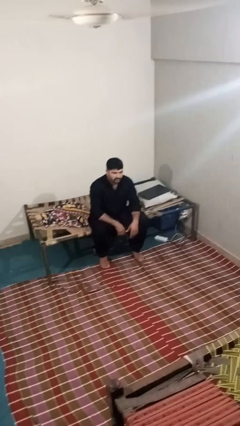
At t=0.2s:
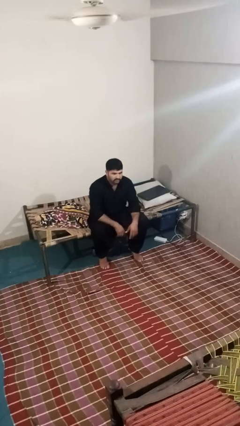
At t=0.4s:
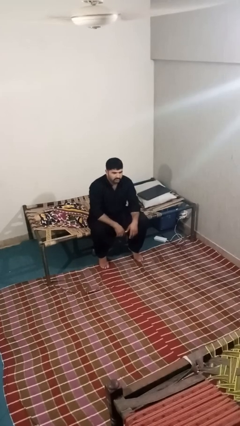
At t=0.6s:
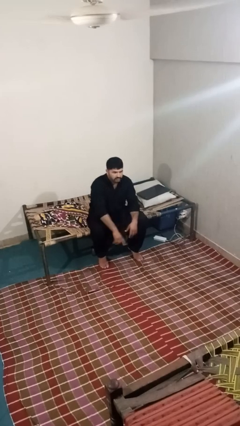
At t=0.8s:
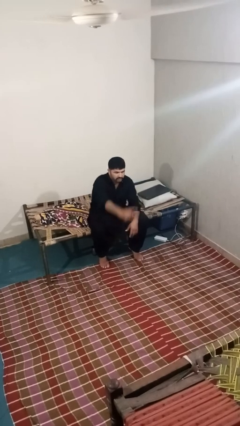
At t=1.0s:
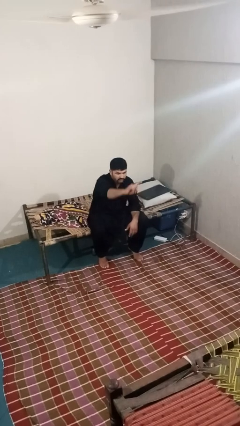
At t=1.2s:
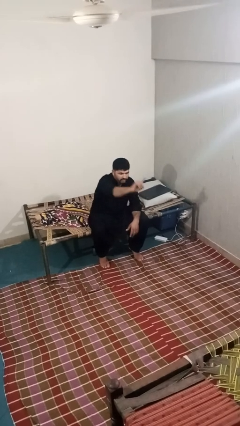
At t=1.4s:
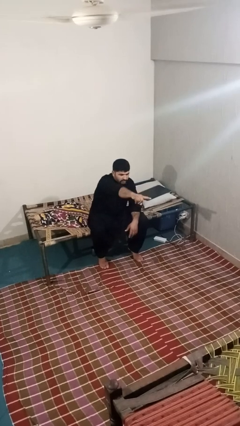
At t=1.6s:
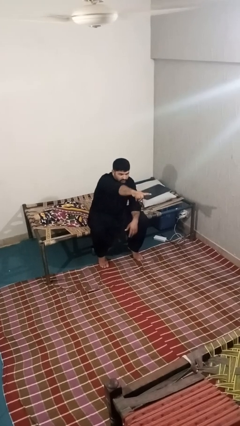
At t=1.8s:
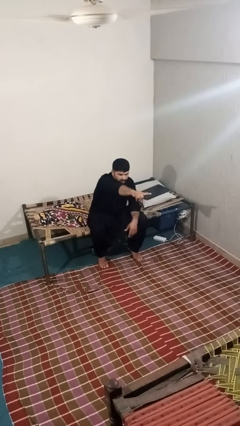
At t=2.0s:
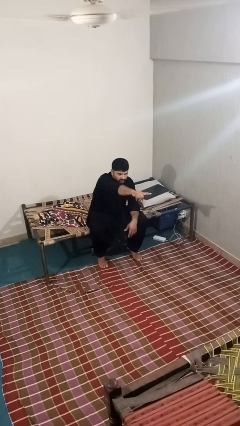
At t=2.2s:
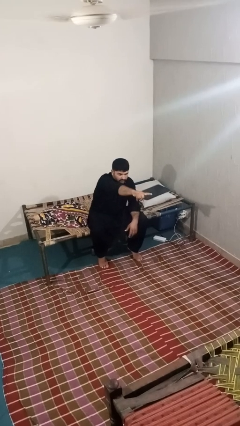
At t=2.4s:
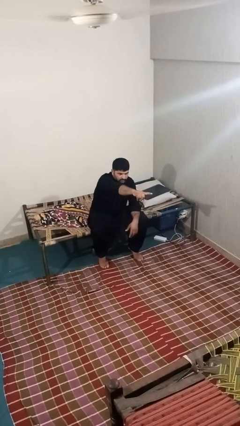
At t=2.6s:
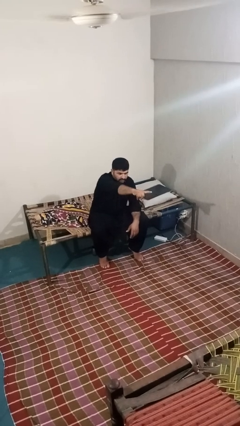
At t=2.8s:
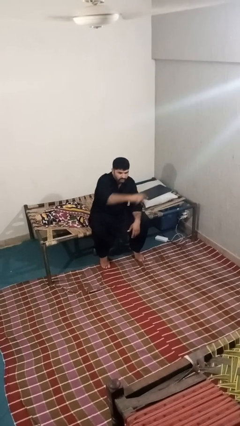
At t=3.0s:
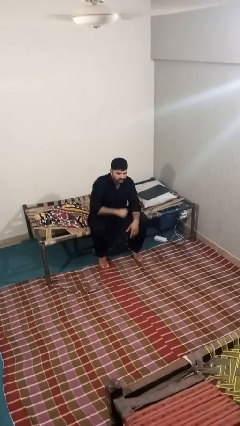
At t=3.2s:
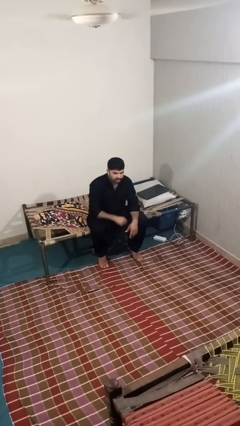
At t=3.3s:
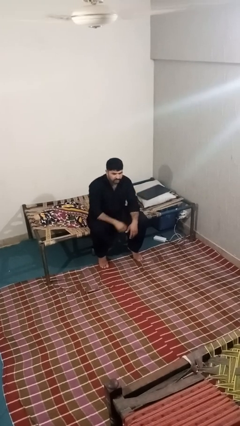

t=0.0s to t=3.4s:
person points at person

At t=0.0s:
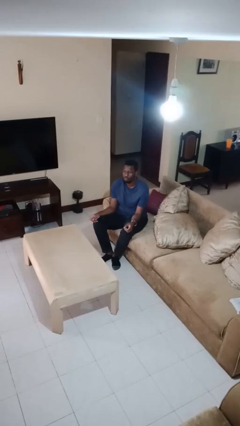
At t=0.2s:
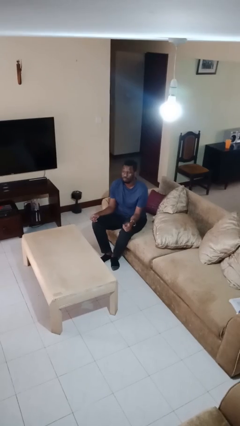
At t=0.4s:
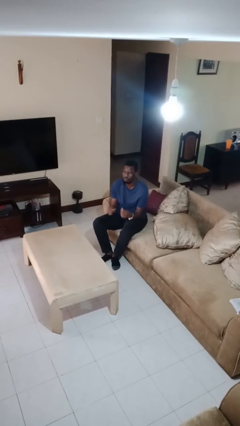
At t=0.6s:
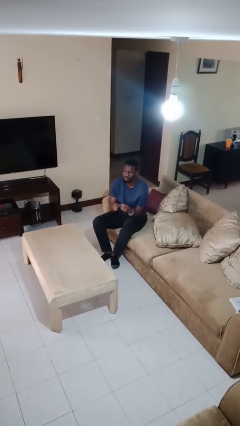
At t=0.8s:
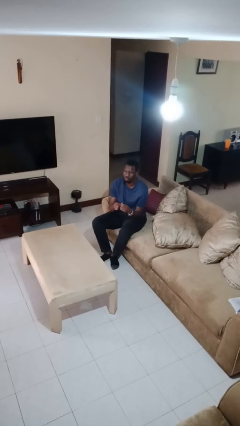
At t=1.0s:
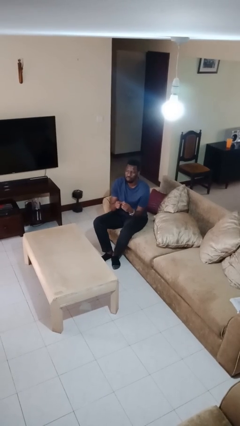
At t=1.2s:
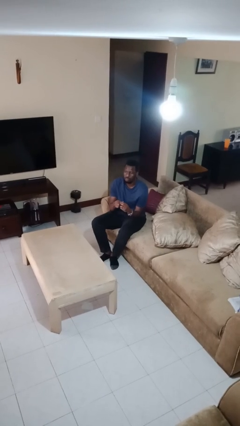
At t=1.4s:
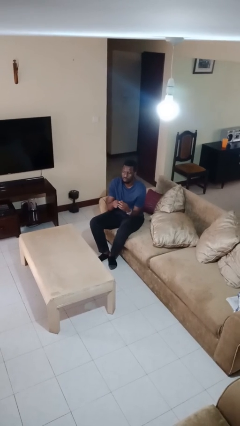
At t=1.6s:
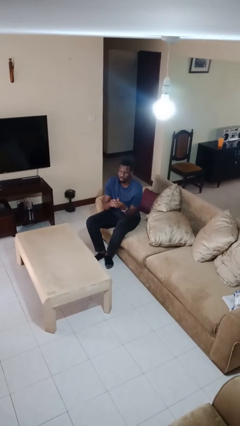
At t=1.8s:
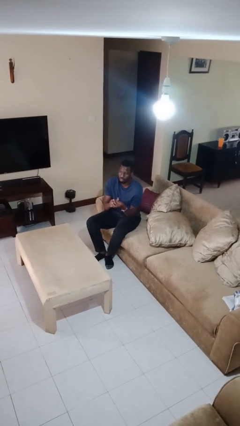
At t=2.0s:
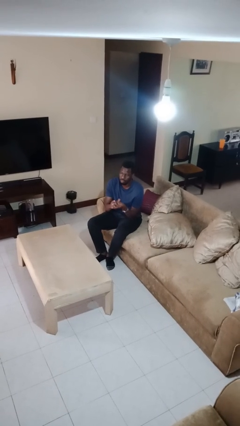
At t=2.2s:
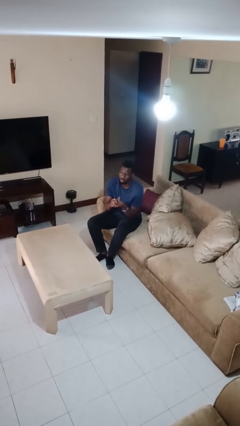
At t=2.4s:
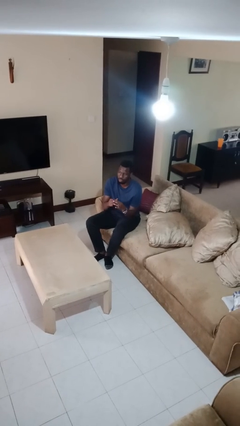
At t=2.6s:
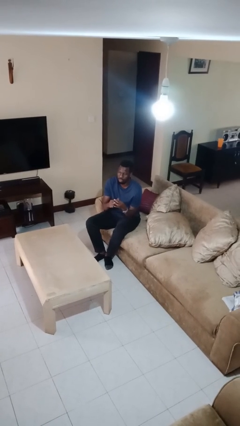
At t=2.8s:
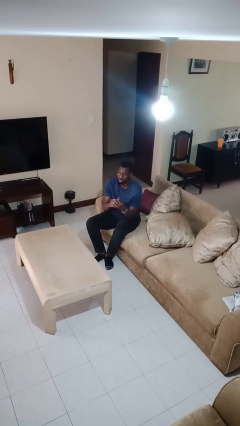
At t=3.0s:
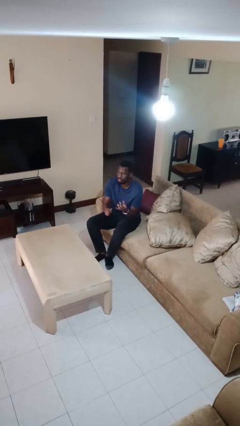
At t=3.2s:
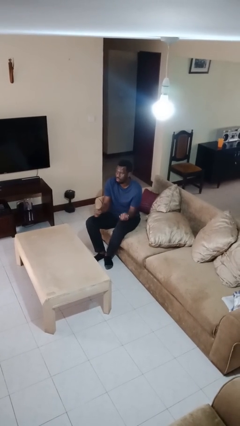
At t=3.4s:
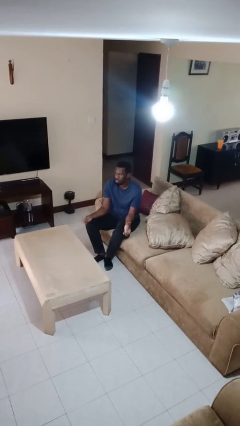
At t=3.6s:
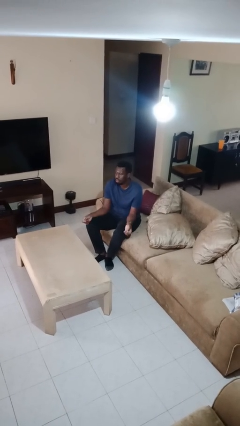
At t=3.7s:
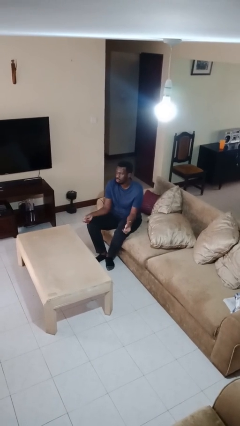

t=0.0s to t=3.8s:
person files fingernails

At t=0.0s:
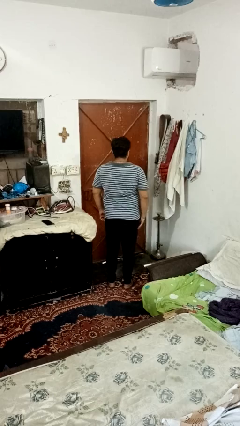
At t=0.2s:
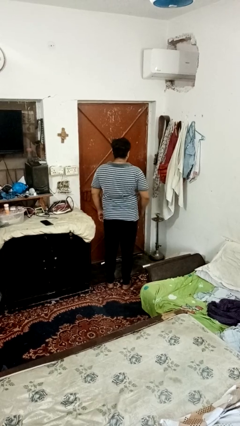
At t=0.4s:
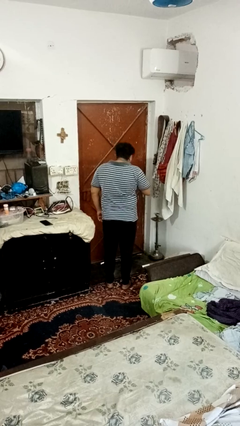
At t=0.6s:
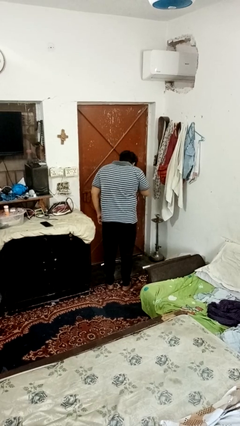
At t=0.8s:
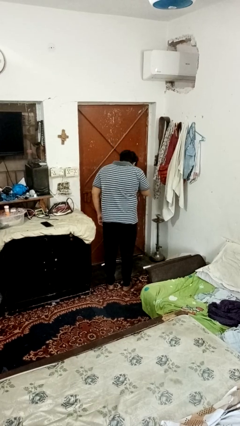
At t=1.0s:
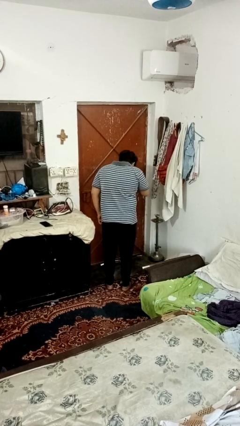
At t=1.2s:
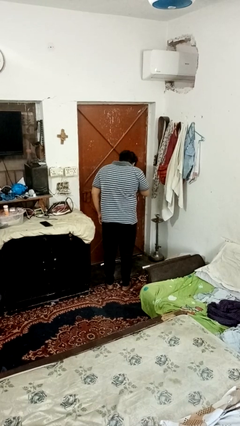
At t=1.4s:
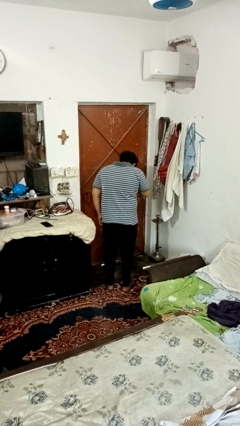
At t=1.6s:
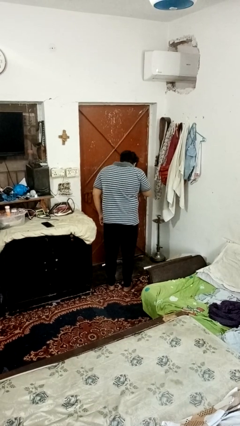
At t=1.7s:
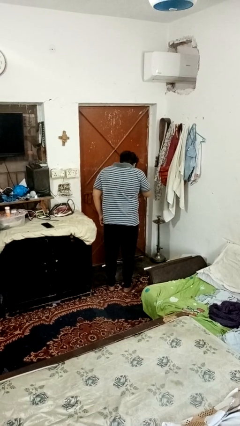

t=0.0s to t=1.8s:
person sneezes into hand

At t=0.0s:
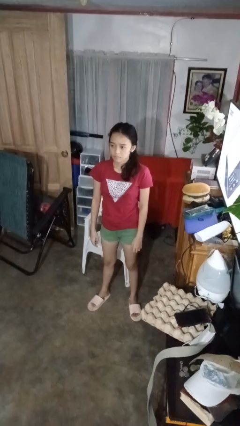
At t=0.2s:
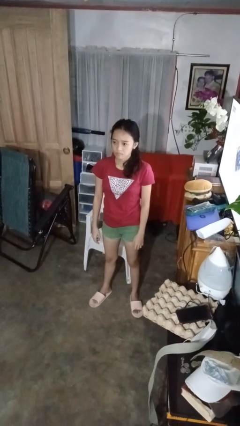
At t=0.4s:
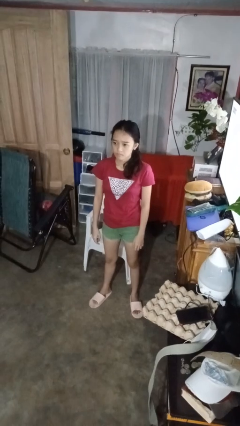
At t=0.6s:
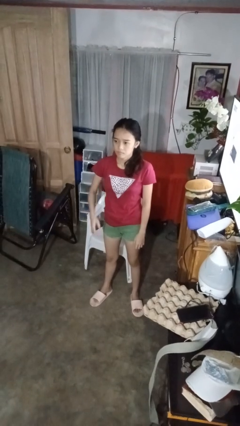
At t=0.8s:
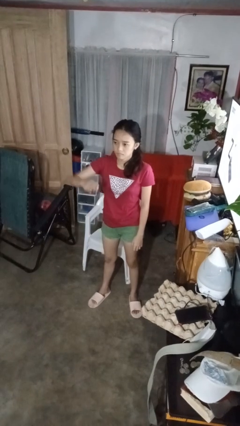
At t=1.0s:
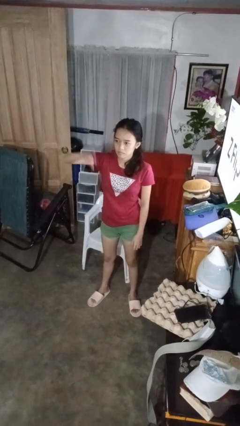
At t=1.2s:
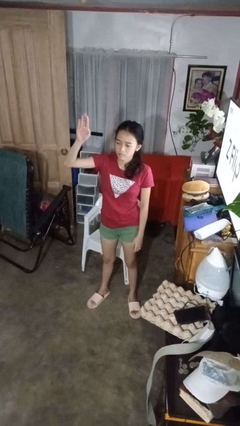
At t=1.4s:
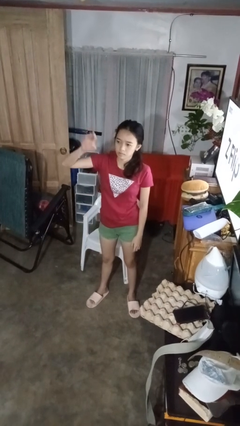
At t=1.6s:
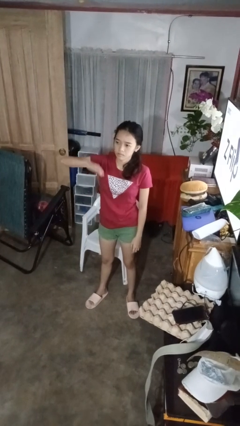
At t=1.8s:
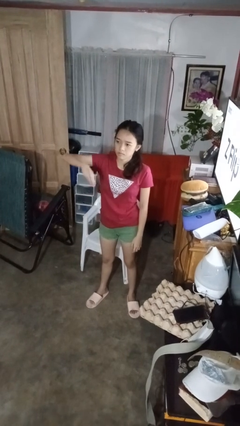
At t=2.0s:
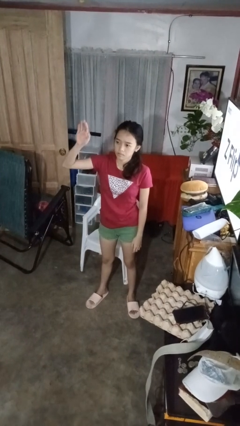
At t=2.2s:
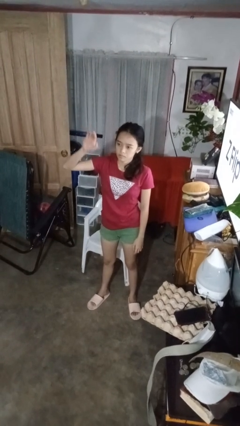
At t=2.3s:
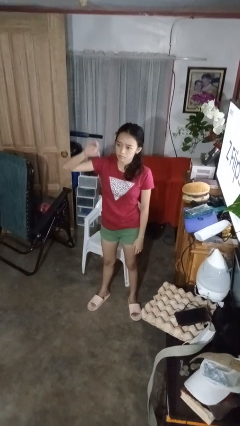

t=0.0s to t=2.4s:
person gestures swipe up

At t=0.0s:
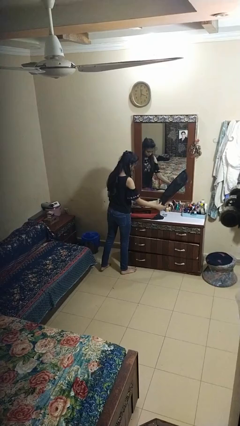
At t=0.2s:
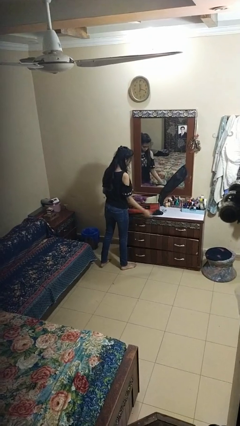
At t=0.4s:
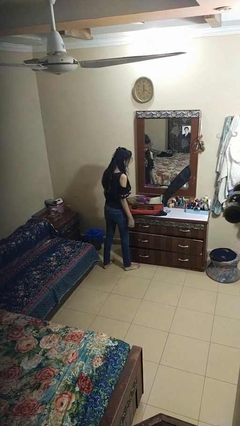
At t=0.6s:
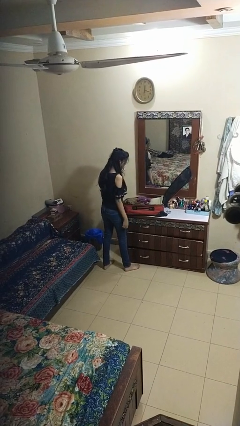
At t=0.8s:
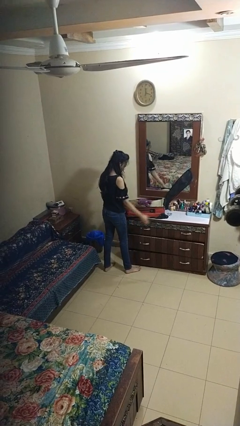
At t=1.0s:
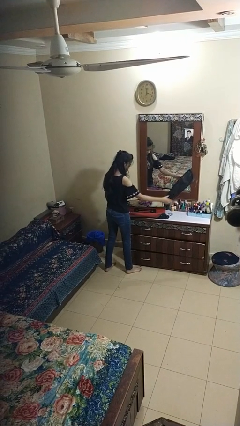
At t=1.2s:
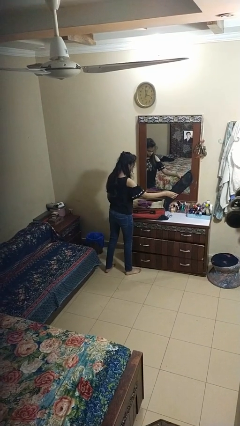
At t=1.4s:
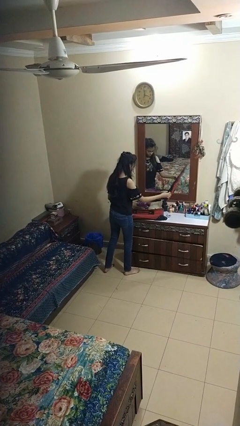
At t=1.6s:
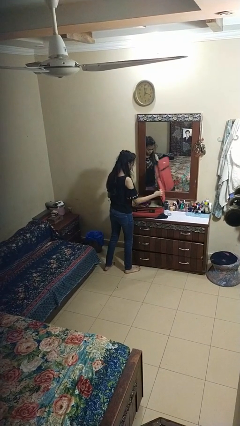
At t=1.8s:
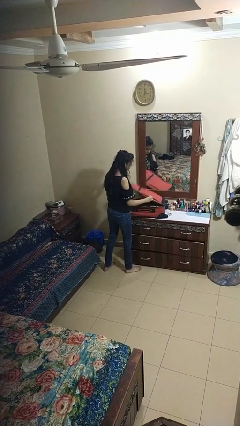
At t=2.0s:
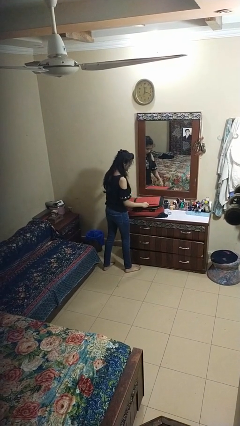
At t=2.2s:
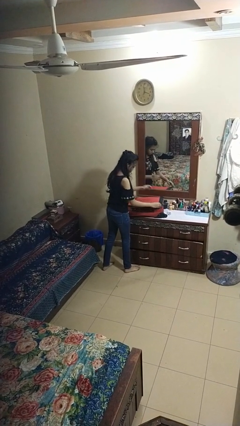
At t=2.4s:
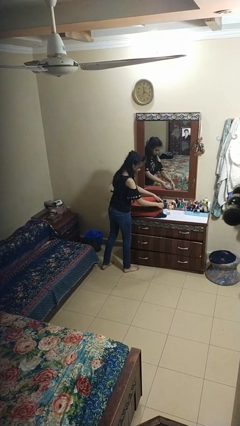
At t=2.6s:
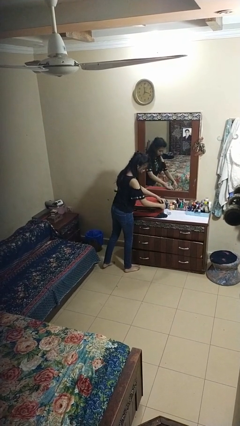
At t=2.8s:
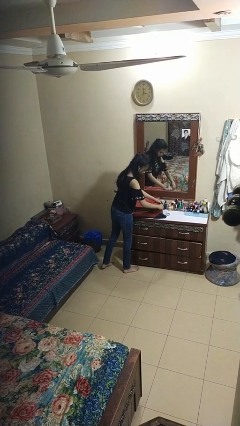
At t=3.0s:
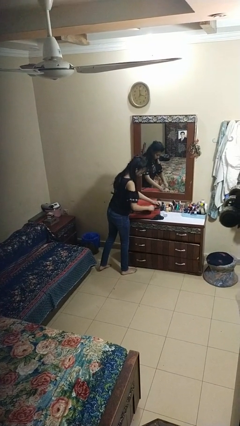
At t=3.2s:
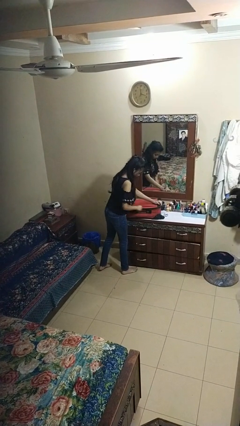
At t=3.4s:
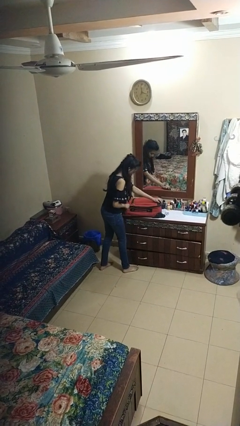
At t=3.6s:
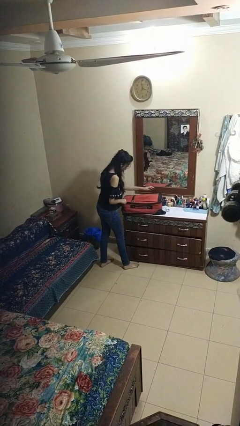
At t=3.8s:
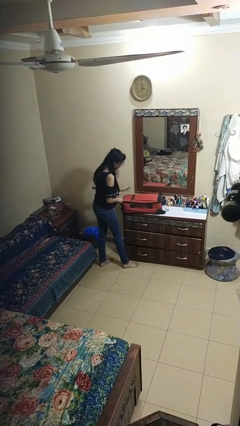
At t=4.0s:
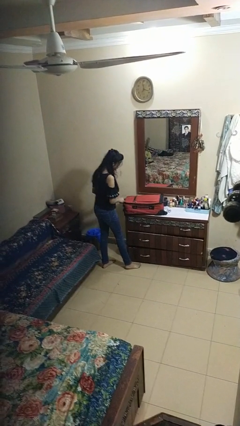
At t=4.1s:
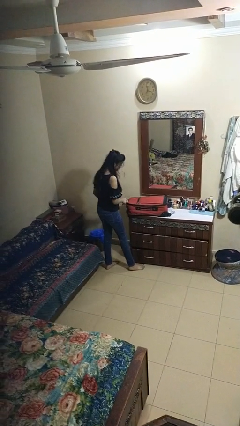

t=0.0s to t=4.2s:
person closes suitcase

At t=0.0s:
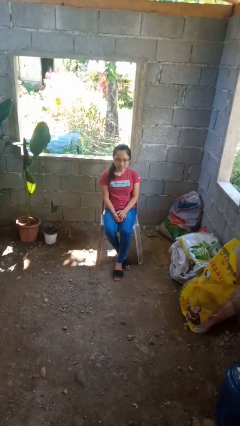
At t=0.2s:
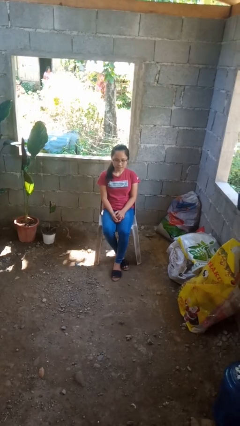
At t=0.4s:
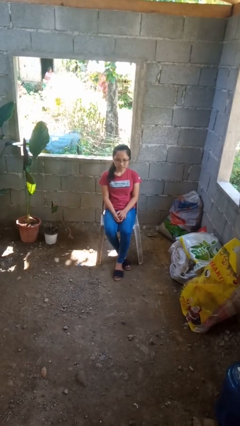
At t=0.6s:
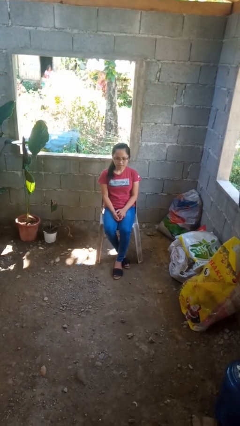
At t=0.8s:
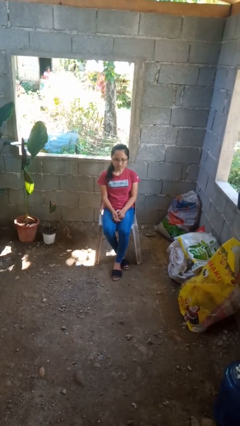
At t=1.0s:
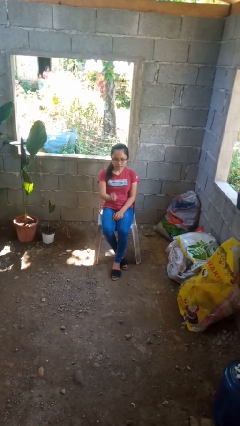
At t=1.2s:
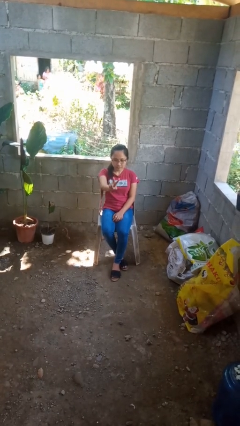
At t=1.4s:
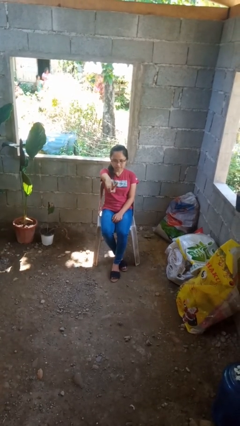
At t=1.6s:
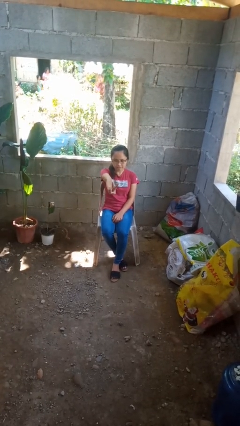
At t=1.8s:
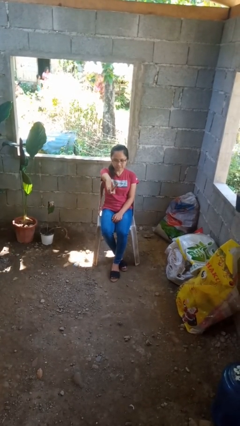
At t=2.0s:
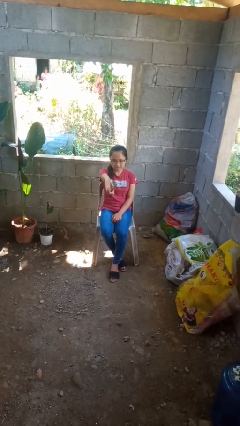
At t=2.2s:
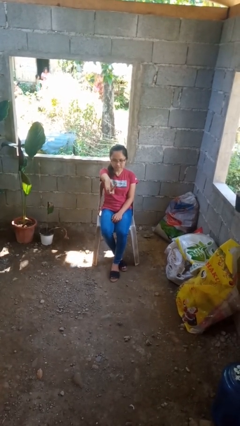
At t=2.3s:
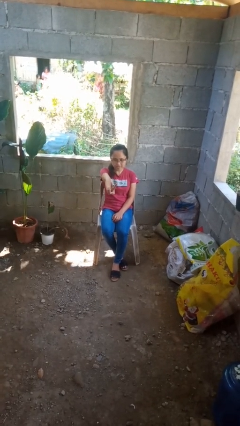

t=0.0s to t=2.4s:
person gestures peace
